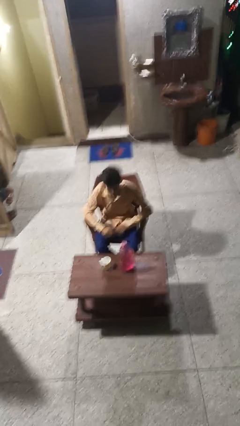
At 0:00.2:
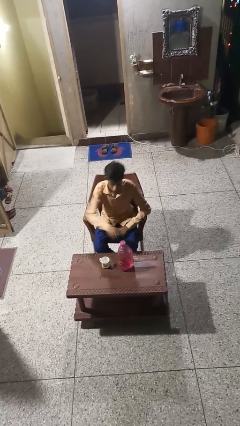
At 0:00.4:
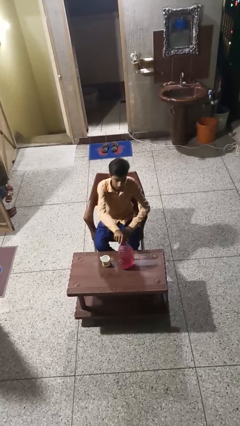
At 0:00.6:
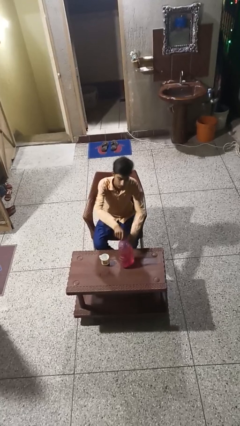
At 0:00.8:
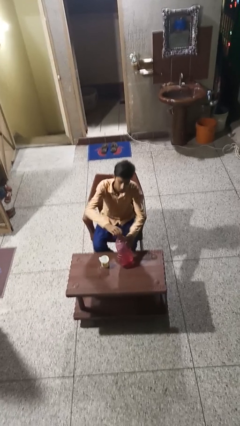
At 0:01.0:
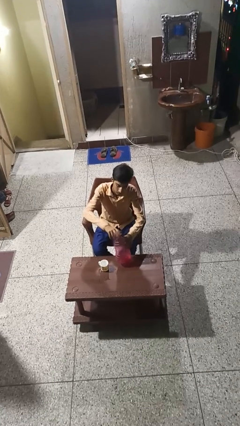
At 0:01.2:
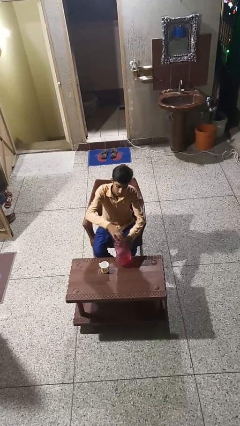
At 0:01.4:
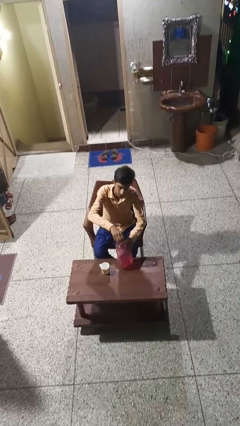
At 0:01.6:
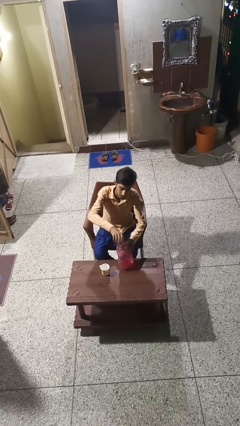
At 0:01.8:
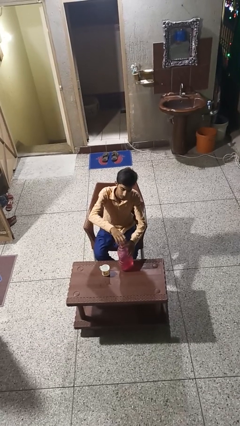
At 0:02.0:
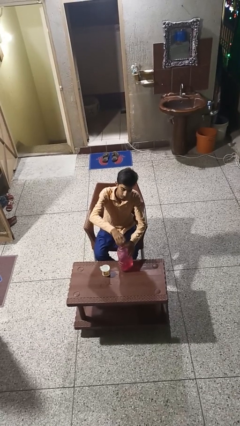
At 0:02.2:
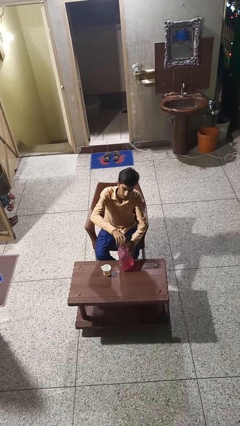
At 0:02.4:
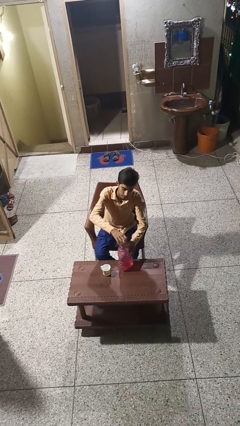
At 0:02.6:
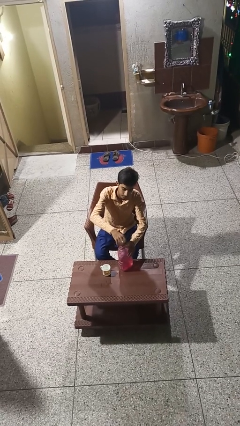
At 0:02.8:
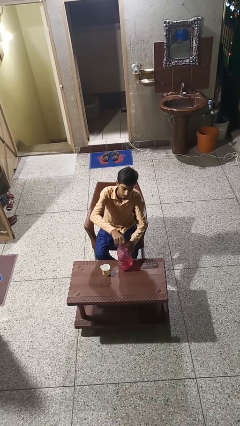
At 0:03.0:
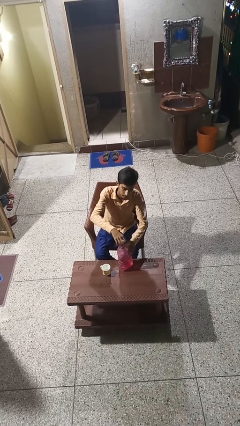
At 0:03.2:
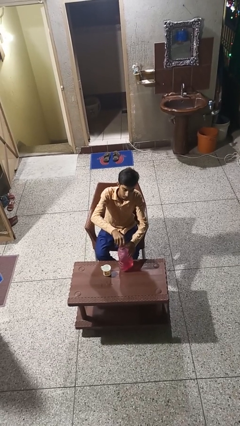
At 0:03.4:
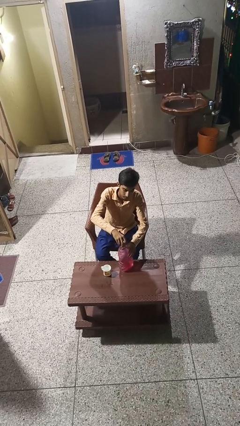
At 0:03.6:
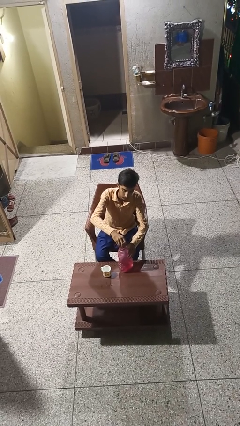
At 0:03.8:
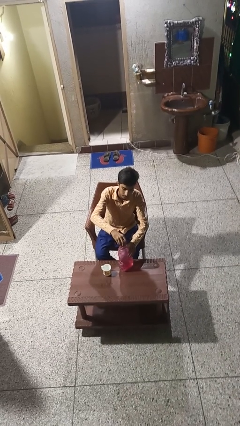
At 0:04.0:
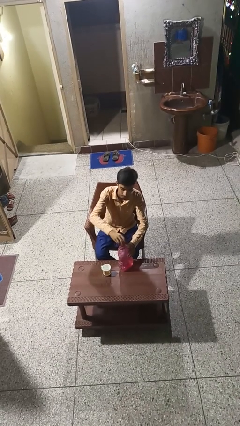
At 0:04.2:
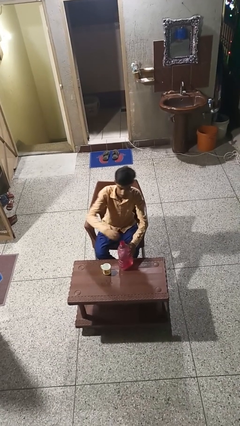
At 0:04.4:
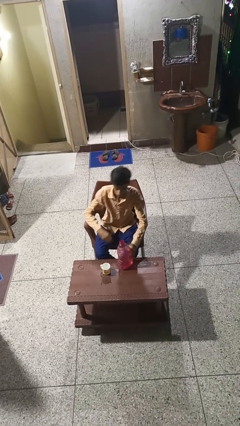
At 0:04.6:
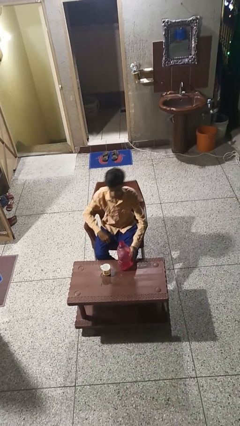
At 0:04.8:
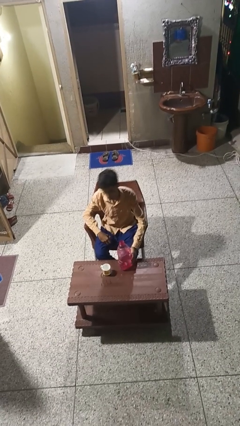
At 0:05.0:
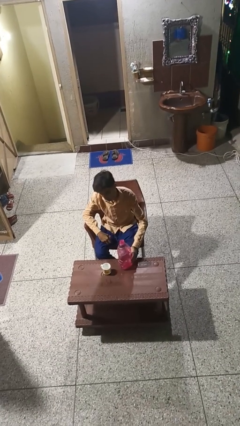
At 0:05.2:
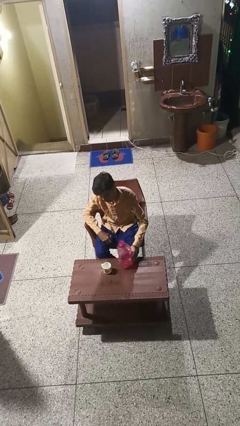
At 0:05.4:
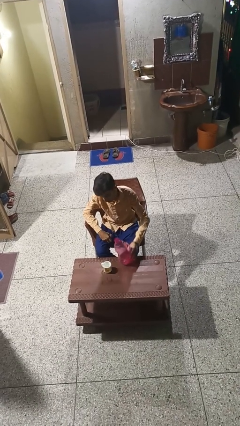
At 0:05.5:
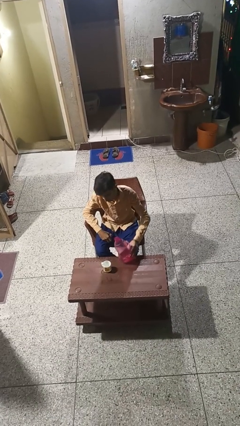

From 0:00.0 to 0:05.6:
person unscrews lid from bottle

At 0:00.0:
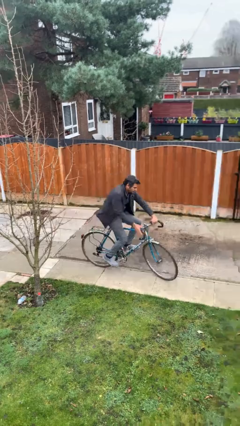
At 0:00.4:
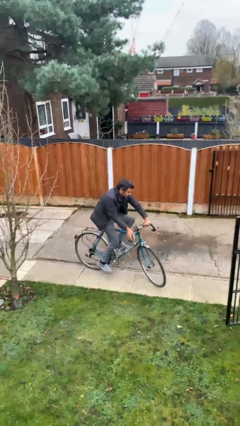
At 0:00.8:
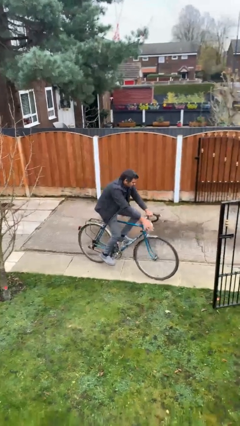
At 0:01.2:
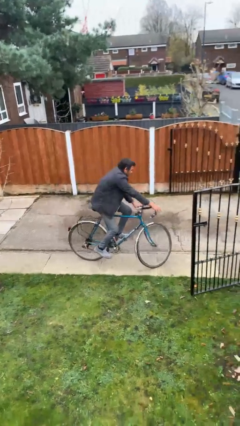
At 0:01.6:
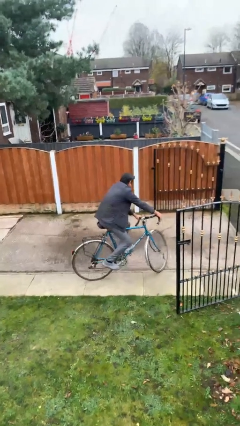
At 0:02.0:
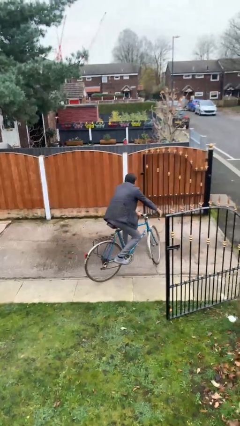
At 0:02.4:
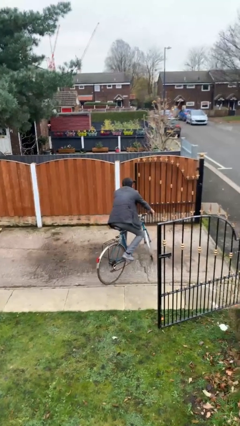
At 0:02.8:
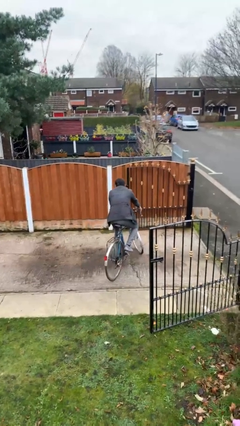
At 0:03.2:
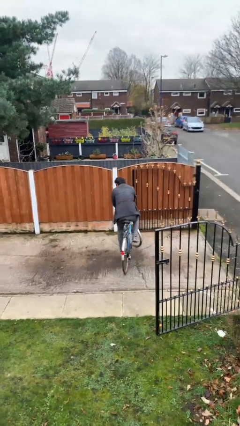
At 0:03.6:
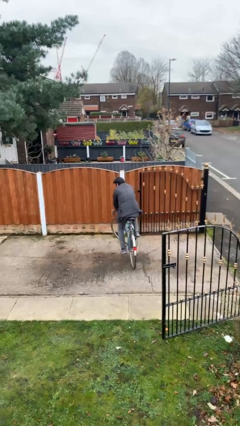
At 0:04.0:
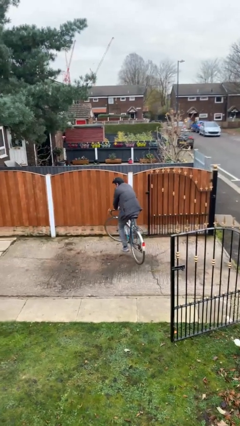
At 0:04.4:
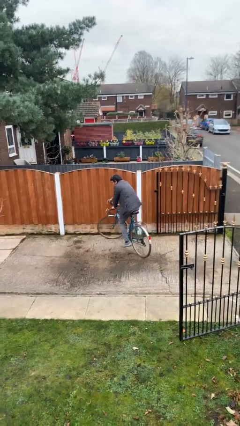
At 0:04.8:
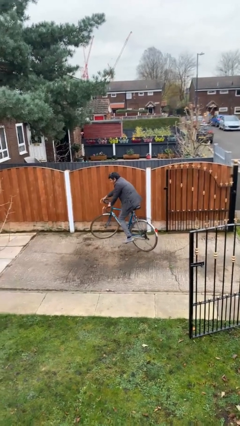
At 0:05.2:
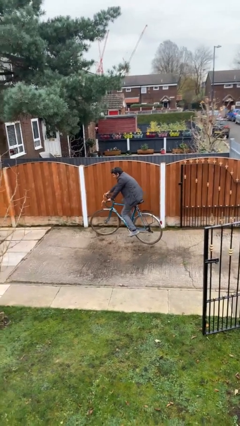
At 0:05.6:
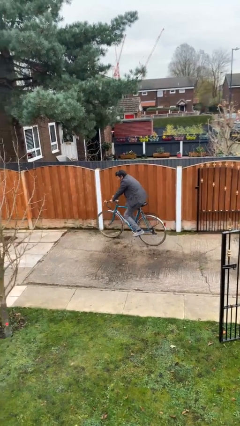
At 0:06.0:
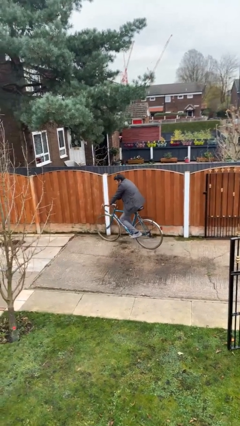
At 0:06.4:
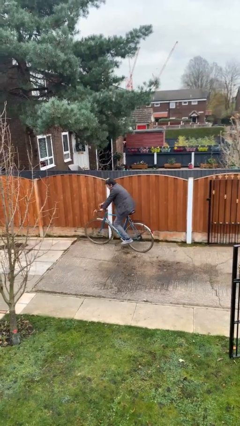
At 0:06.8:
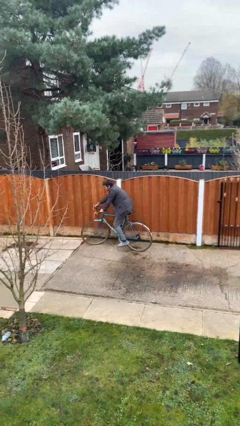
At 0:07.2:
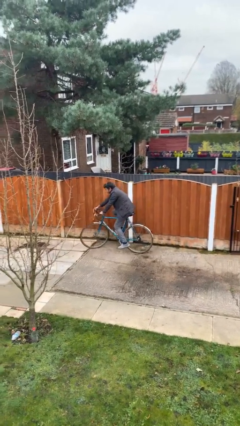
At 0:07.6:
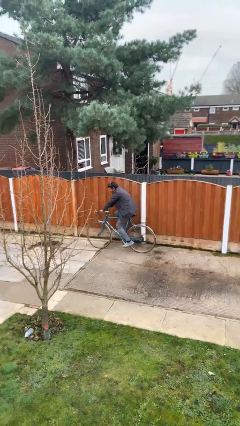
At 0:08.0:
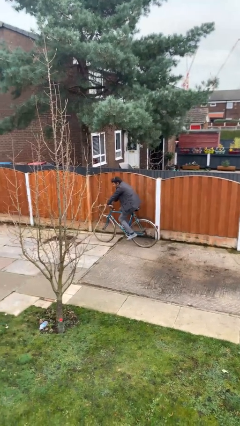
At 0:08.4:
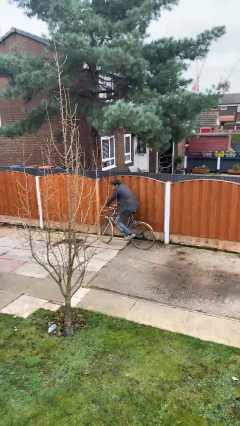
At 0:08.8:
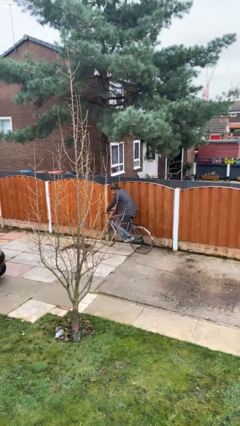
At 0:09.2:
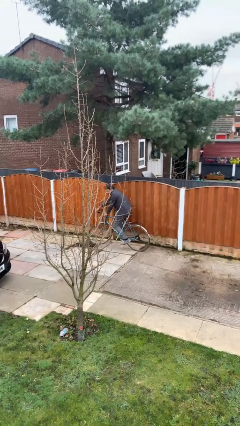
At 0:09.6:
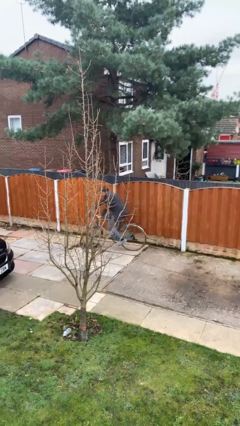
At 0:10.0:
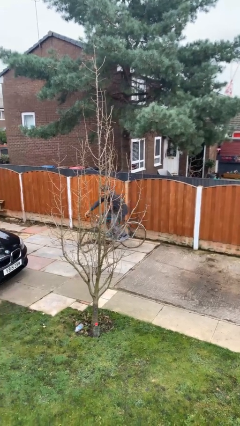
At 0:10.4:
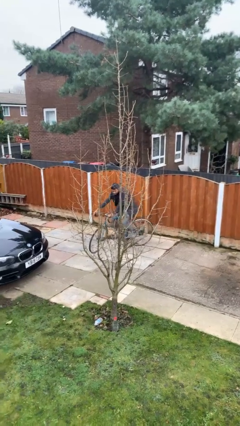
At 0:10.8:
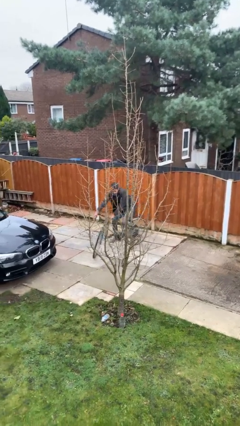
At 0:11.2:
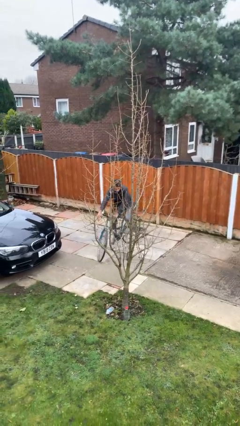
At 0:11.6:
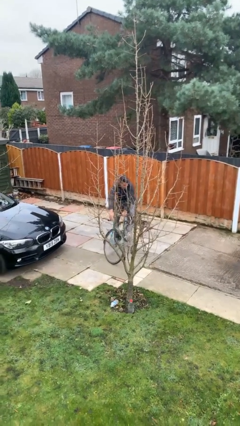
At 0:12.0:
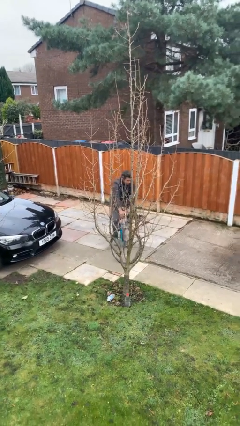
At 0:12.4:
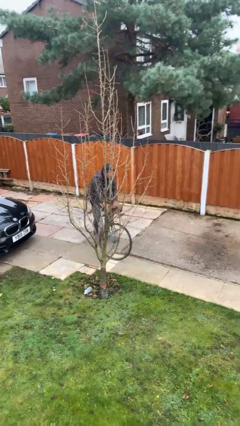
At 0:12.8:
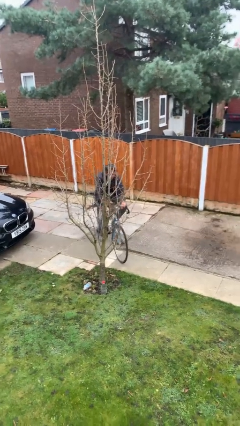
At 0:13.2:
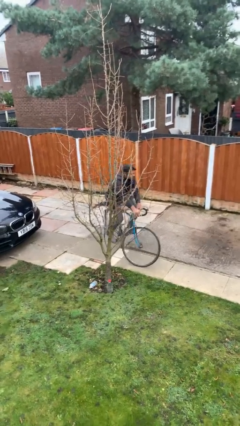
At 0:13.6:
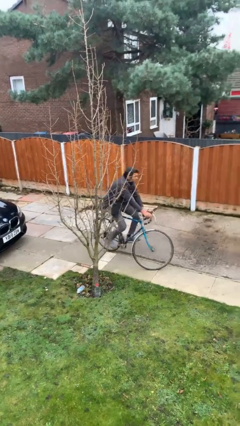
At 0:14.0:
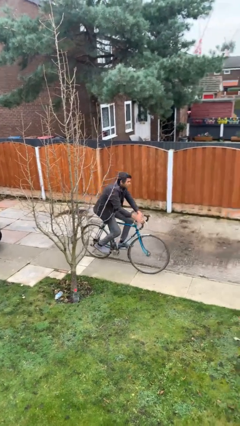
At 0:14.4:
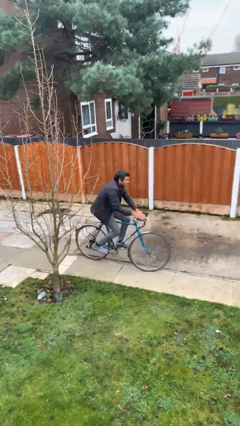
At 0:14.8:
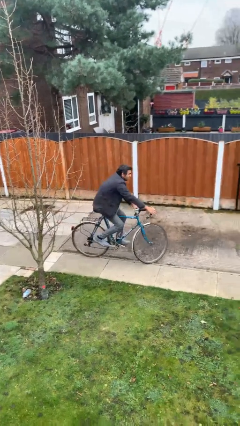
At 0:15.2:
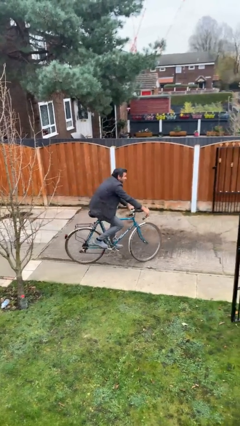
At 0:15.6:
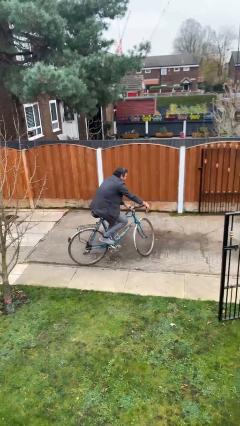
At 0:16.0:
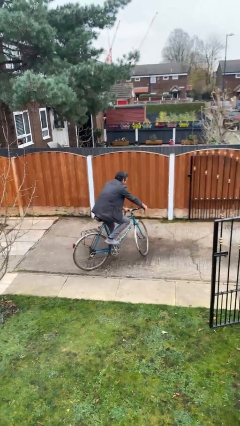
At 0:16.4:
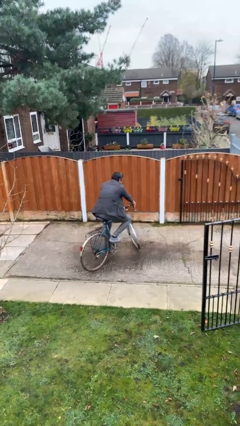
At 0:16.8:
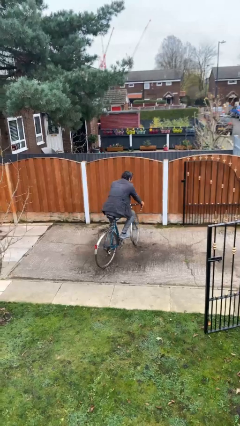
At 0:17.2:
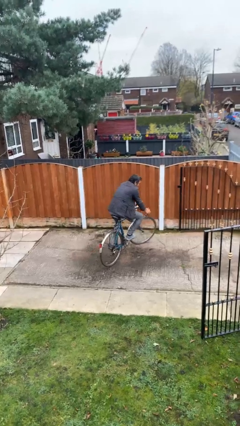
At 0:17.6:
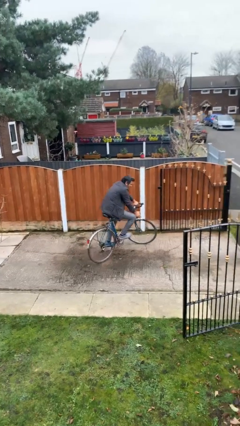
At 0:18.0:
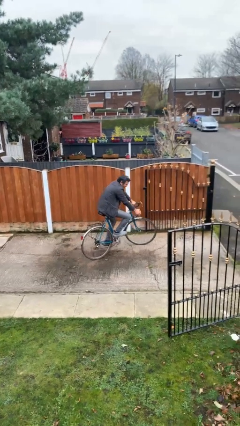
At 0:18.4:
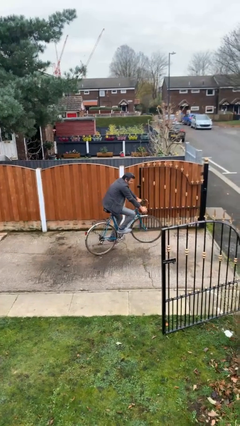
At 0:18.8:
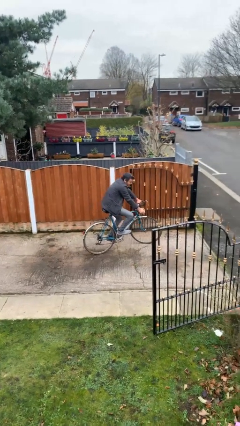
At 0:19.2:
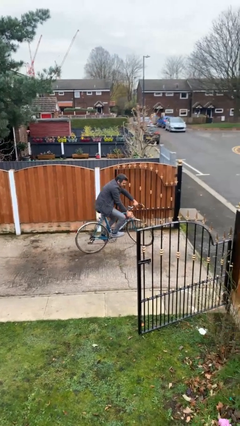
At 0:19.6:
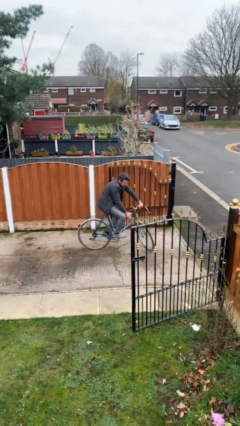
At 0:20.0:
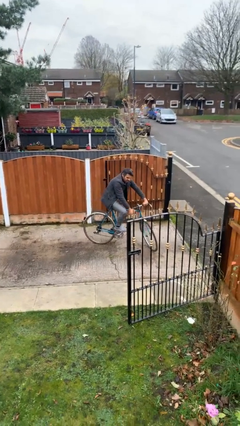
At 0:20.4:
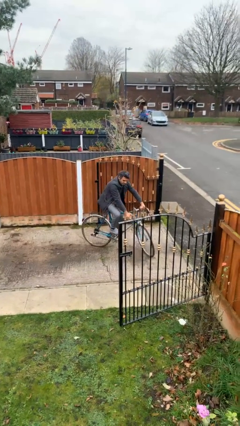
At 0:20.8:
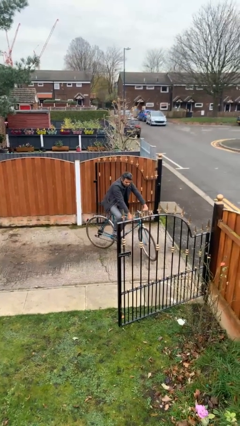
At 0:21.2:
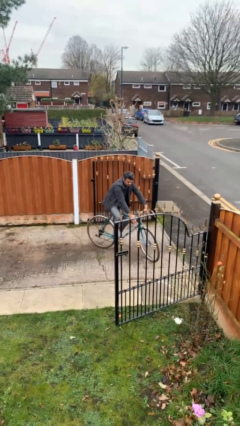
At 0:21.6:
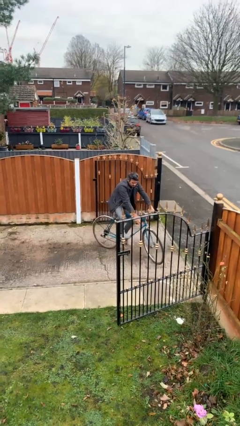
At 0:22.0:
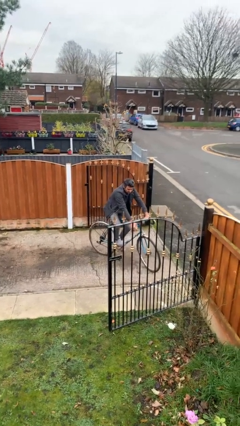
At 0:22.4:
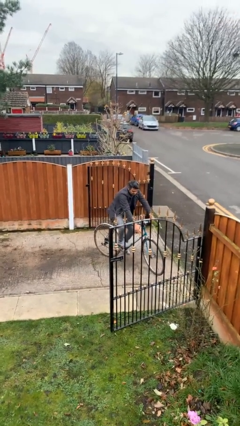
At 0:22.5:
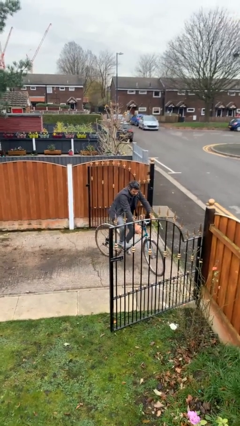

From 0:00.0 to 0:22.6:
person rides bicycle

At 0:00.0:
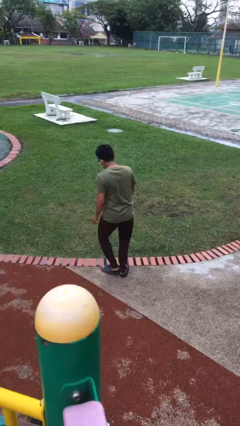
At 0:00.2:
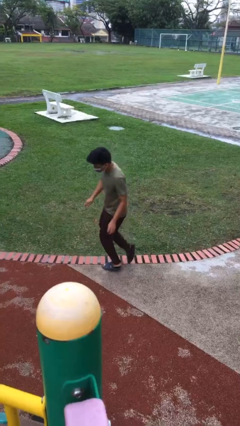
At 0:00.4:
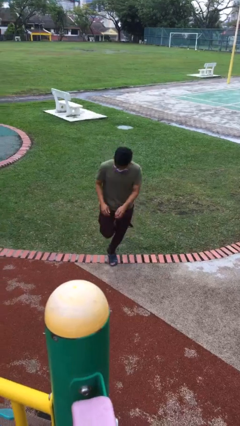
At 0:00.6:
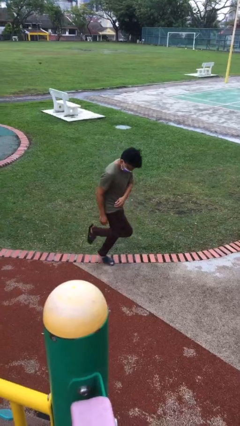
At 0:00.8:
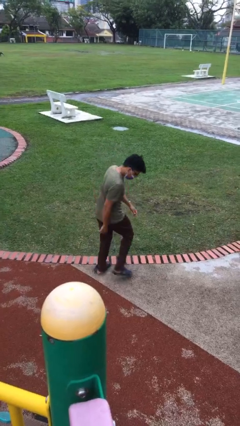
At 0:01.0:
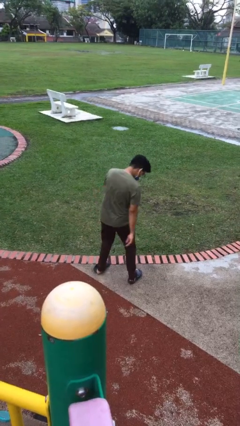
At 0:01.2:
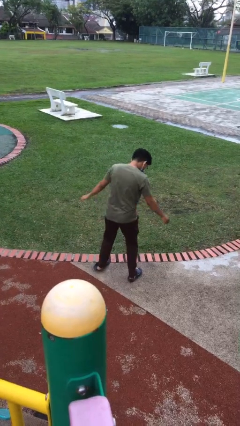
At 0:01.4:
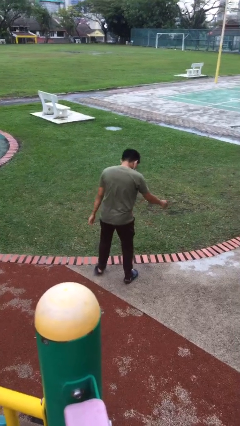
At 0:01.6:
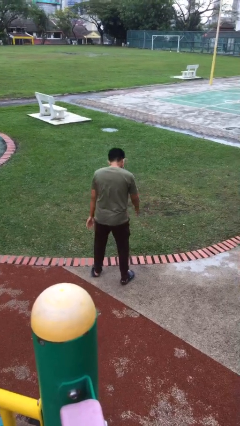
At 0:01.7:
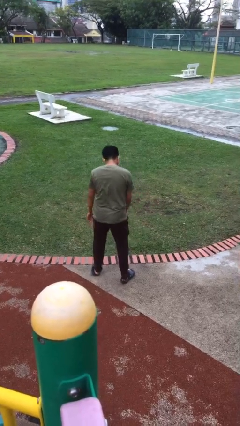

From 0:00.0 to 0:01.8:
person twirls
